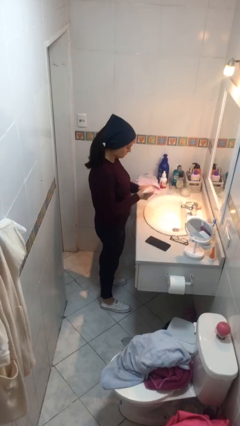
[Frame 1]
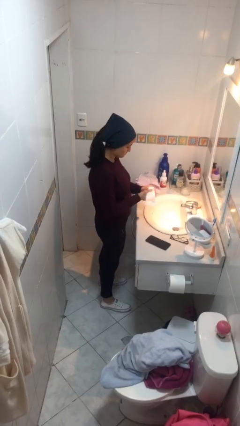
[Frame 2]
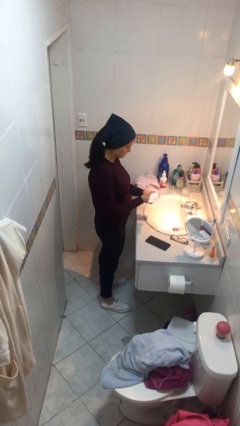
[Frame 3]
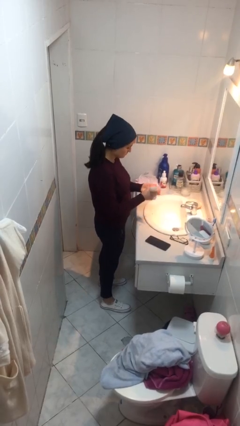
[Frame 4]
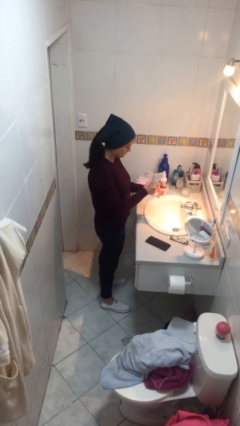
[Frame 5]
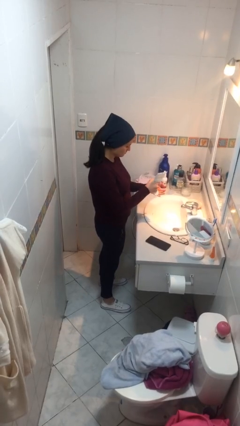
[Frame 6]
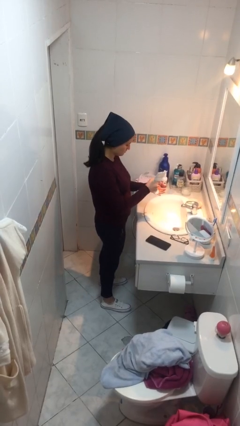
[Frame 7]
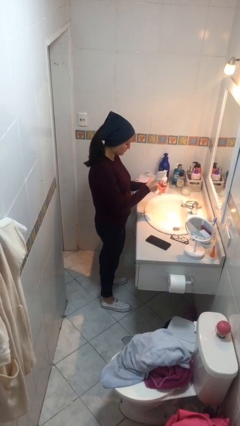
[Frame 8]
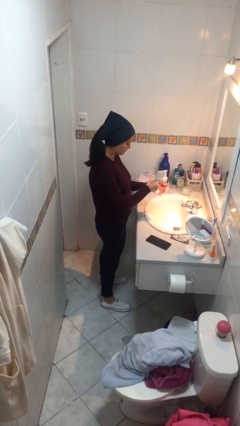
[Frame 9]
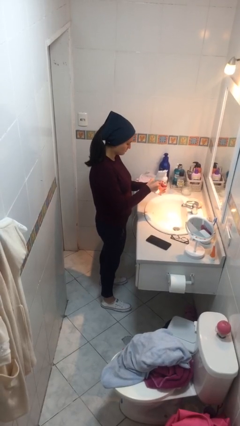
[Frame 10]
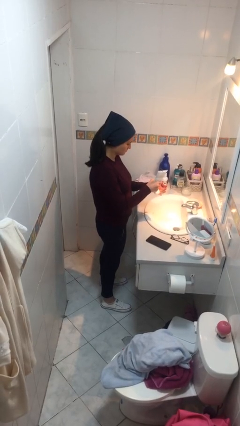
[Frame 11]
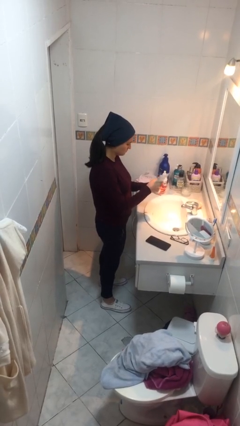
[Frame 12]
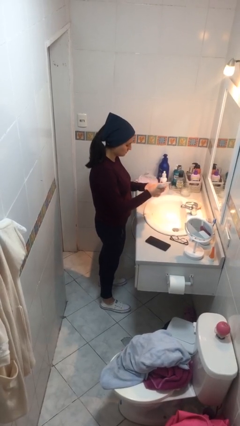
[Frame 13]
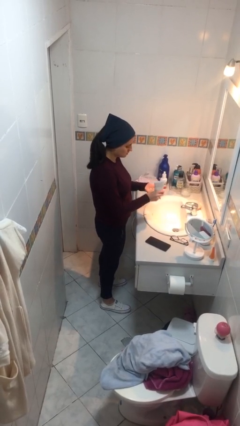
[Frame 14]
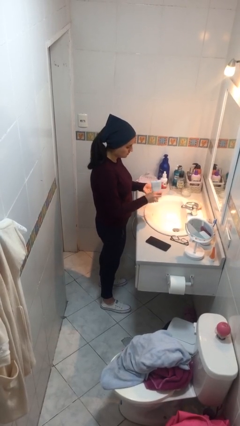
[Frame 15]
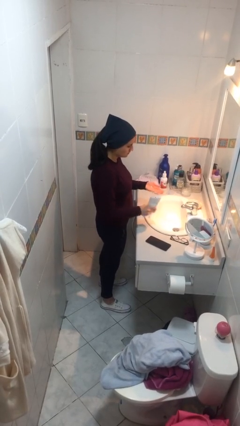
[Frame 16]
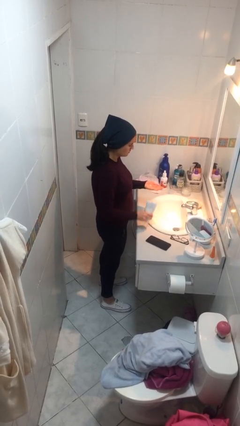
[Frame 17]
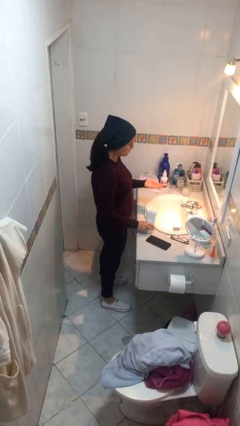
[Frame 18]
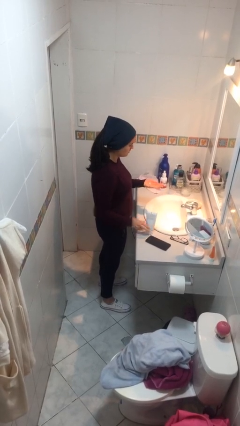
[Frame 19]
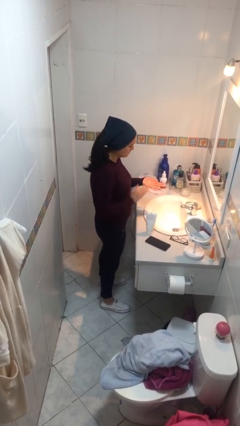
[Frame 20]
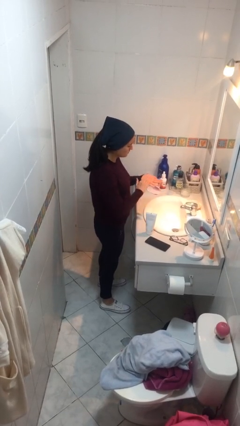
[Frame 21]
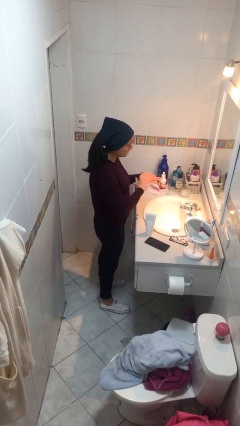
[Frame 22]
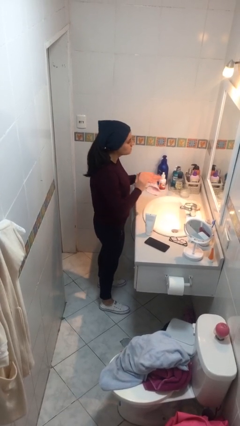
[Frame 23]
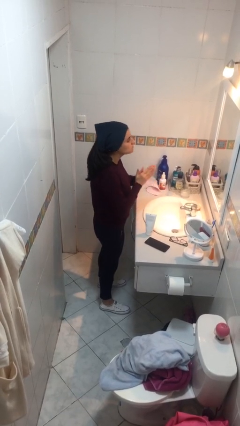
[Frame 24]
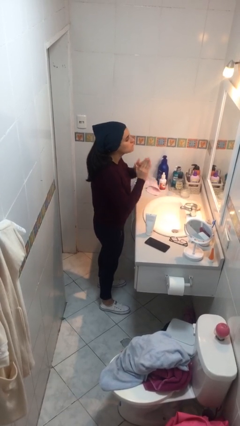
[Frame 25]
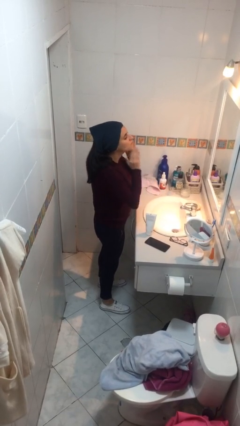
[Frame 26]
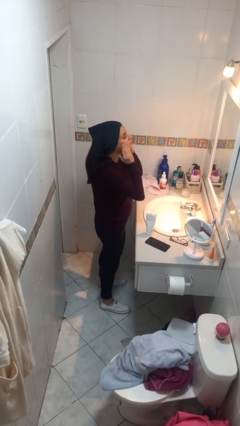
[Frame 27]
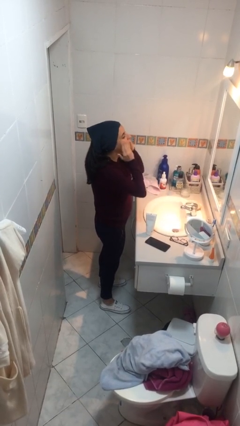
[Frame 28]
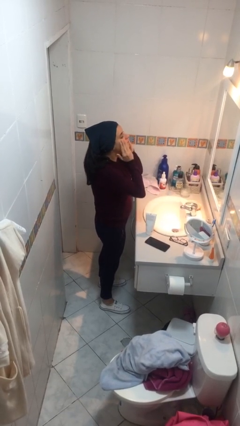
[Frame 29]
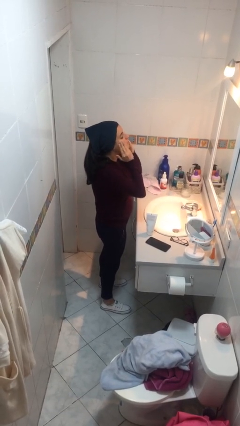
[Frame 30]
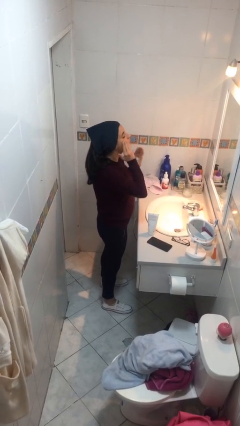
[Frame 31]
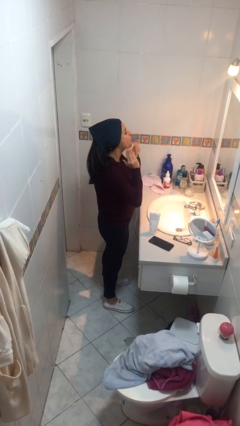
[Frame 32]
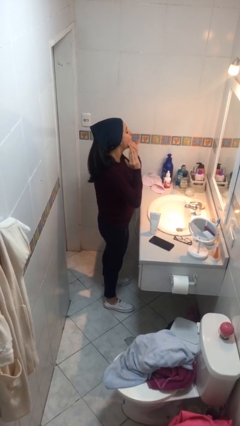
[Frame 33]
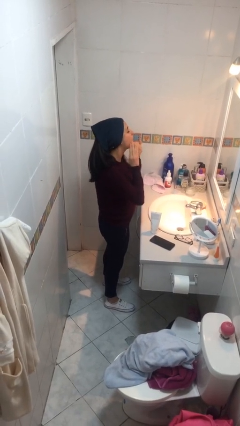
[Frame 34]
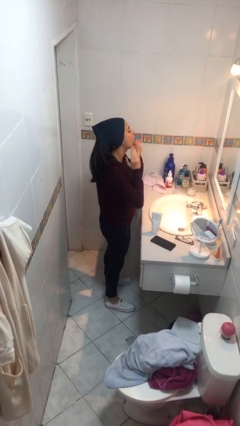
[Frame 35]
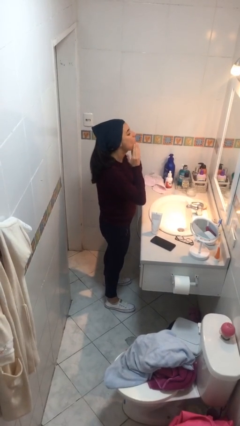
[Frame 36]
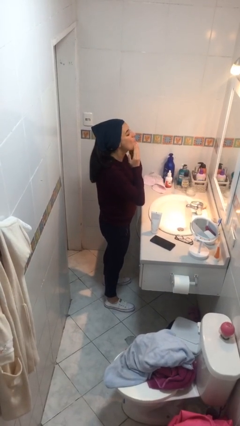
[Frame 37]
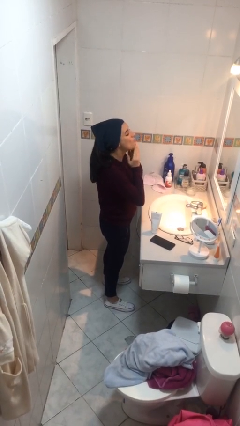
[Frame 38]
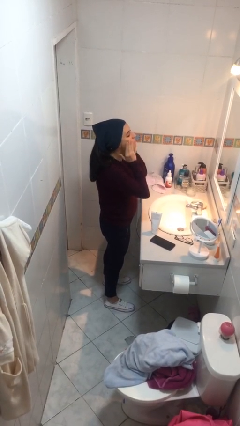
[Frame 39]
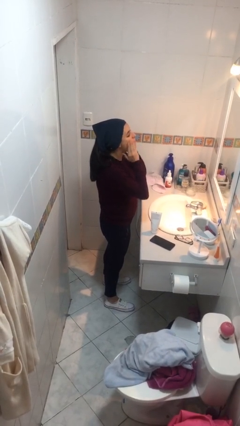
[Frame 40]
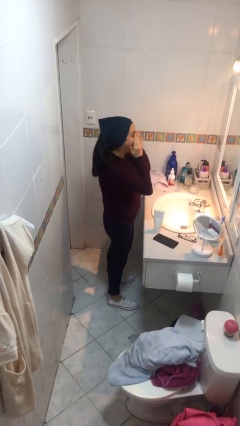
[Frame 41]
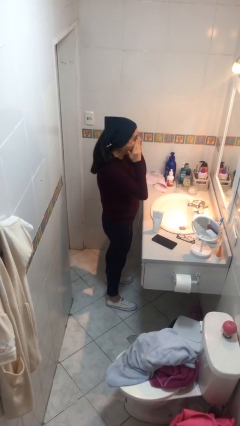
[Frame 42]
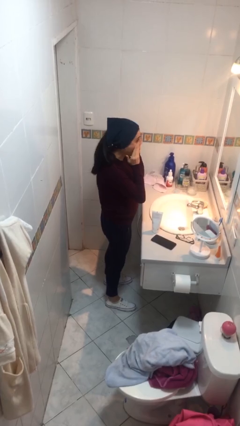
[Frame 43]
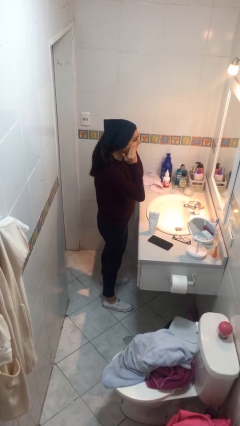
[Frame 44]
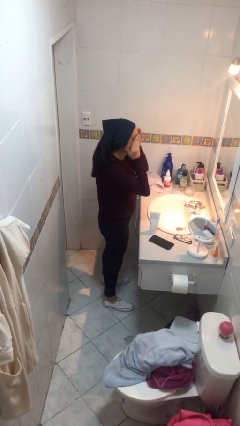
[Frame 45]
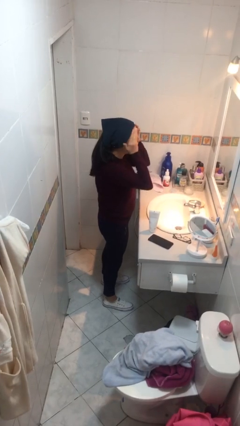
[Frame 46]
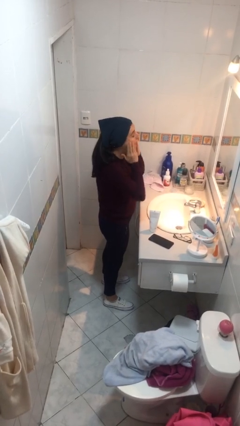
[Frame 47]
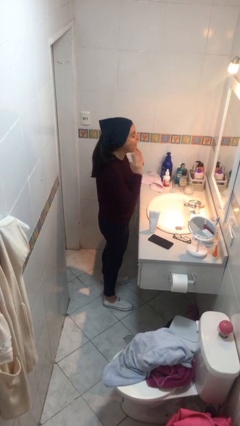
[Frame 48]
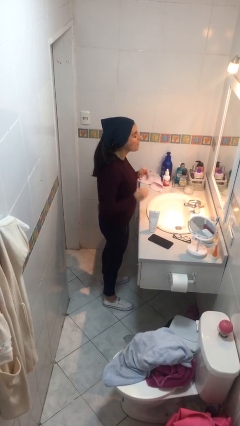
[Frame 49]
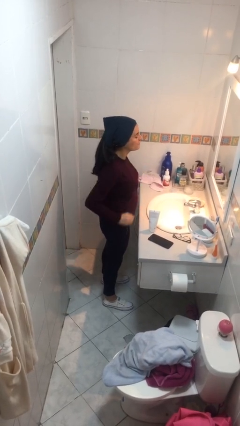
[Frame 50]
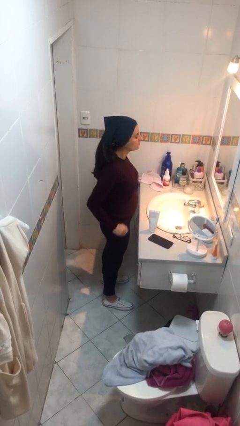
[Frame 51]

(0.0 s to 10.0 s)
person applies facial moisturizer

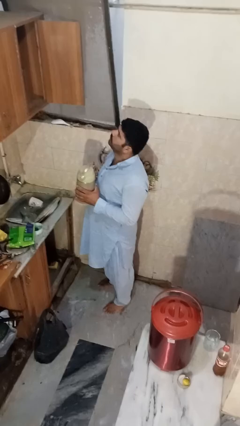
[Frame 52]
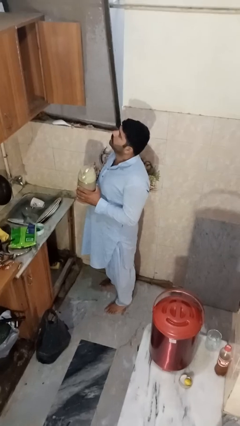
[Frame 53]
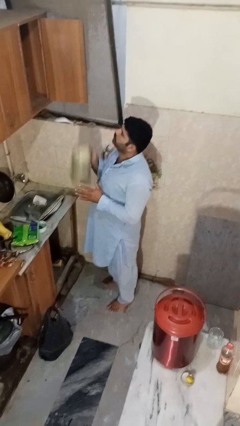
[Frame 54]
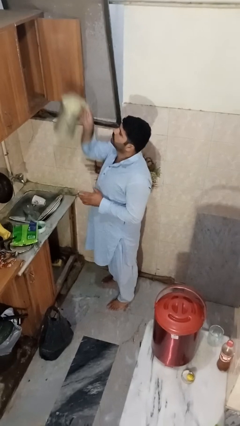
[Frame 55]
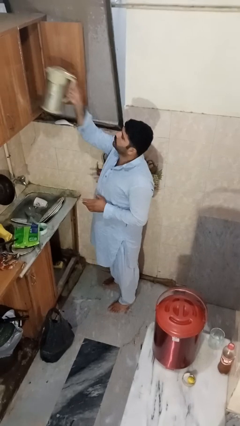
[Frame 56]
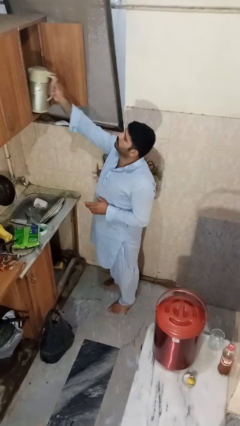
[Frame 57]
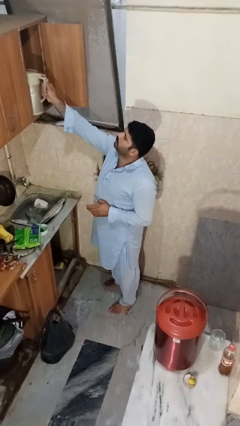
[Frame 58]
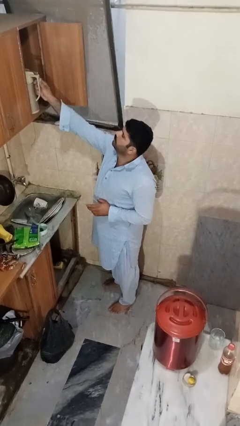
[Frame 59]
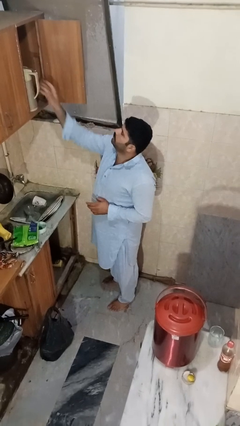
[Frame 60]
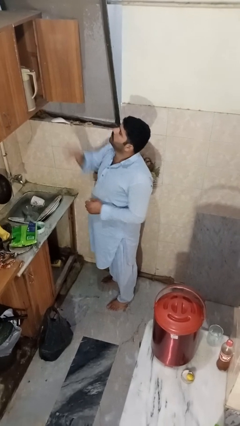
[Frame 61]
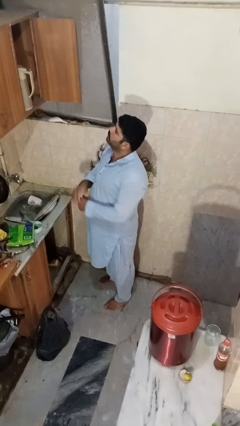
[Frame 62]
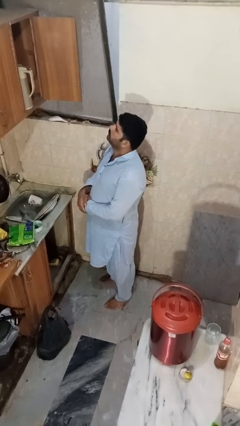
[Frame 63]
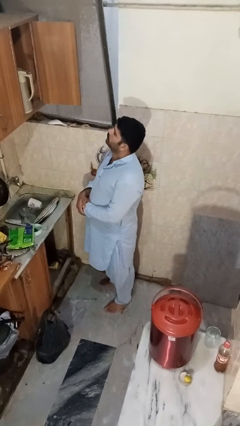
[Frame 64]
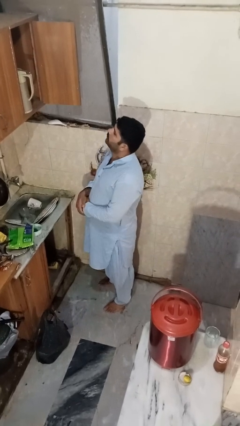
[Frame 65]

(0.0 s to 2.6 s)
person puts object in cabinet

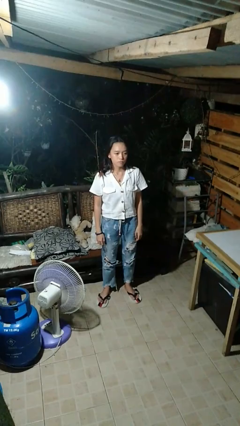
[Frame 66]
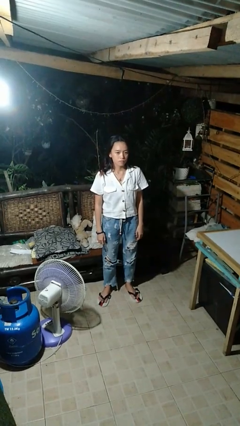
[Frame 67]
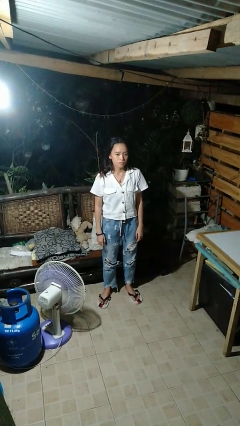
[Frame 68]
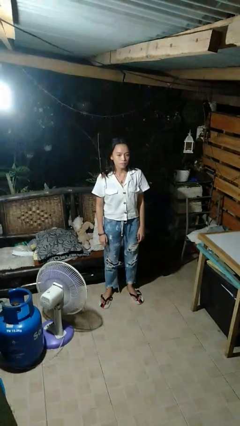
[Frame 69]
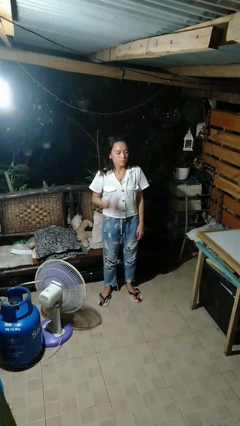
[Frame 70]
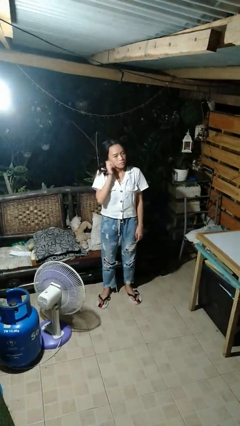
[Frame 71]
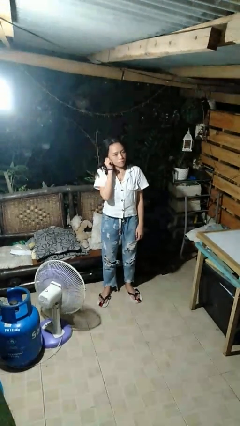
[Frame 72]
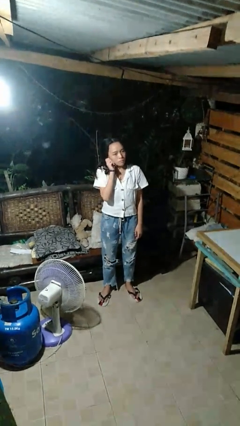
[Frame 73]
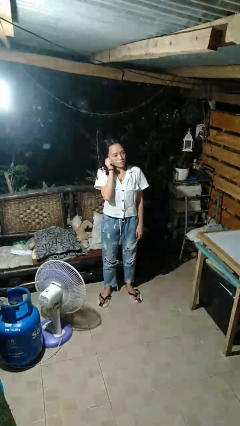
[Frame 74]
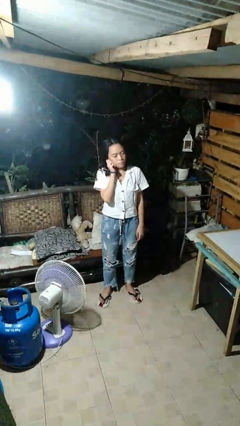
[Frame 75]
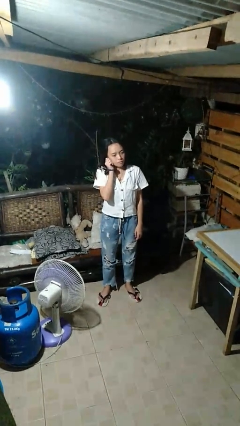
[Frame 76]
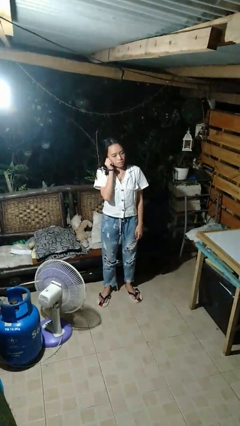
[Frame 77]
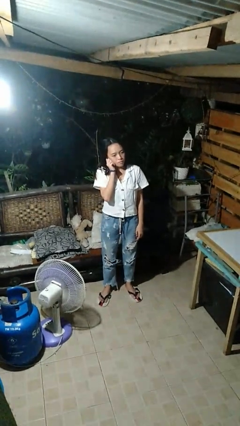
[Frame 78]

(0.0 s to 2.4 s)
person touches earlobe

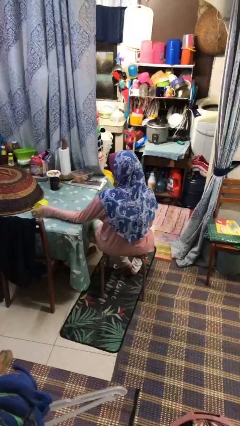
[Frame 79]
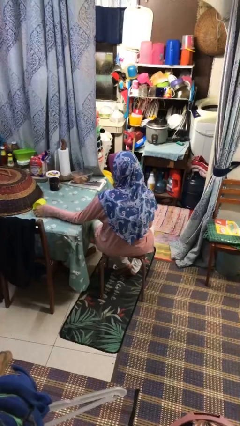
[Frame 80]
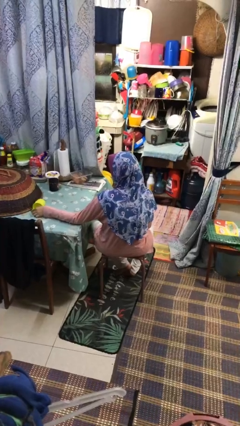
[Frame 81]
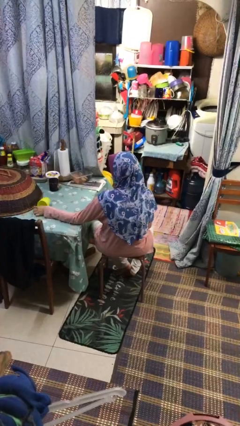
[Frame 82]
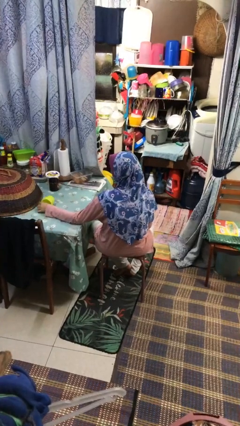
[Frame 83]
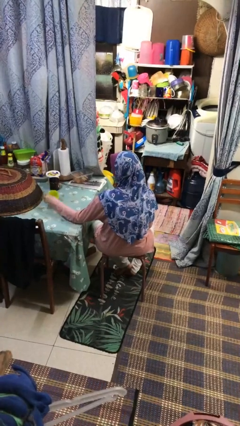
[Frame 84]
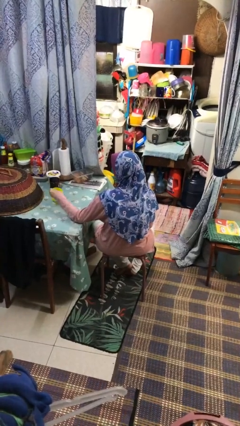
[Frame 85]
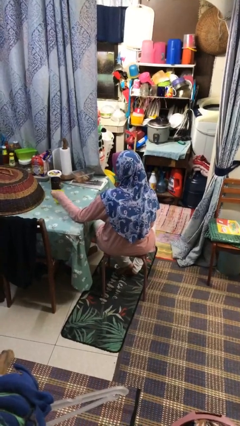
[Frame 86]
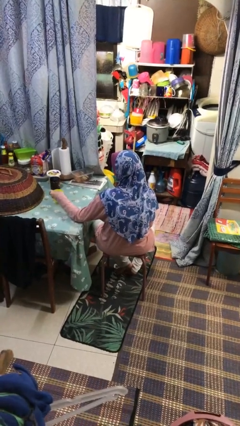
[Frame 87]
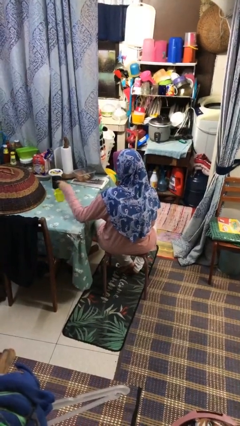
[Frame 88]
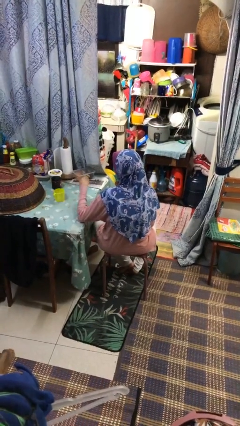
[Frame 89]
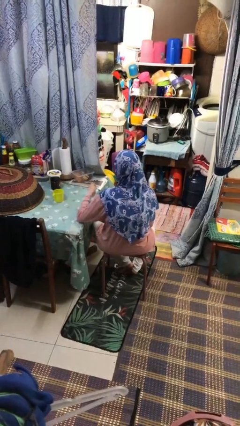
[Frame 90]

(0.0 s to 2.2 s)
person sets upright glass

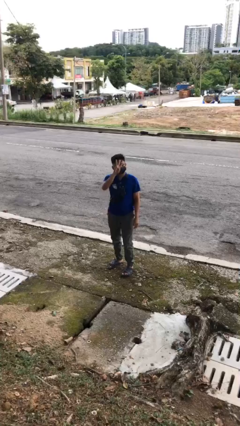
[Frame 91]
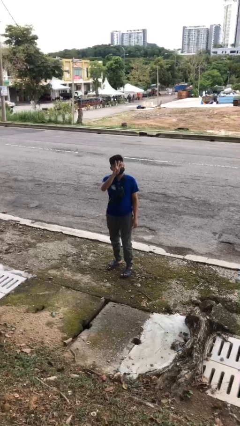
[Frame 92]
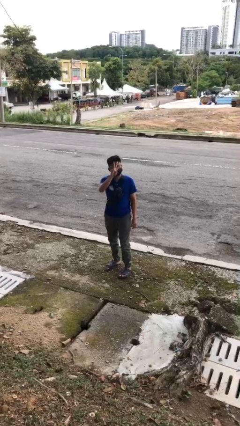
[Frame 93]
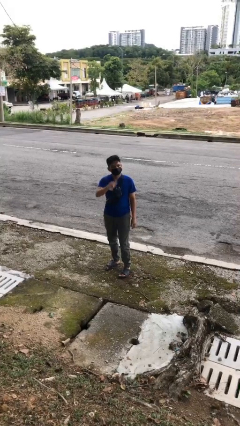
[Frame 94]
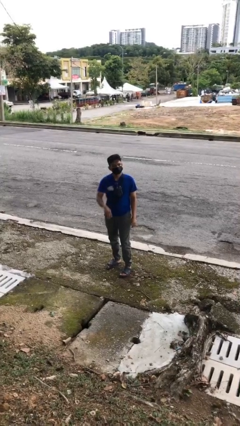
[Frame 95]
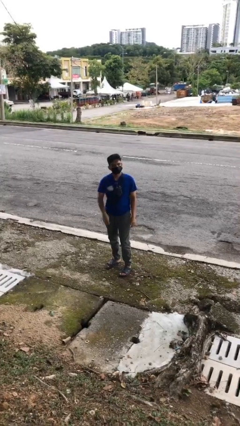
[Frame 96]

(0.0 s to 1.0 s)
person gestures number three
